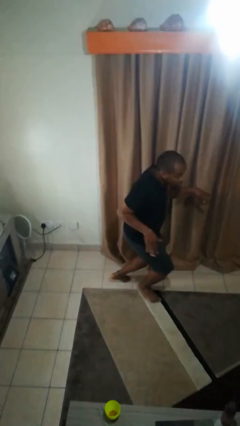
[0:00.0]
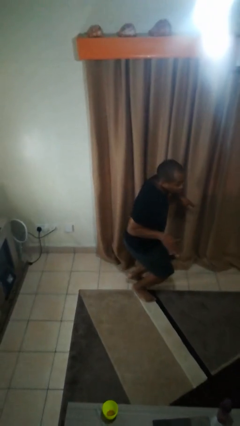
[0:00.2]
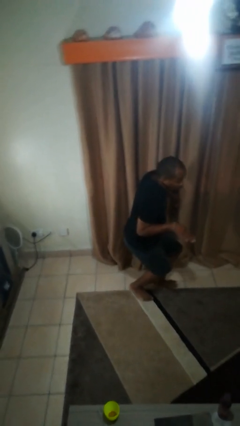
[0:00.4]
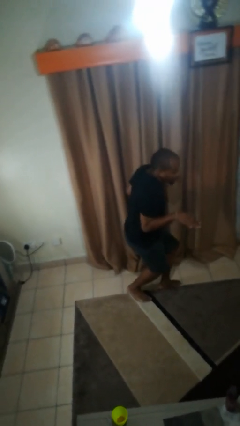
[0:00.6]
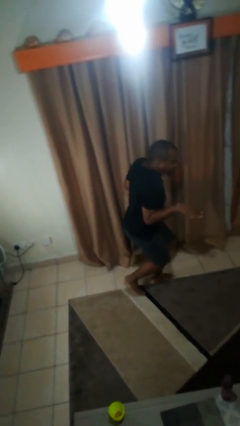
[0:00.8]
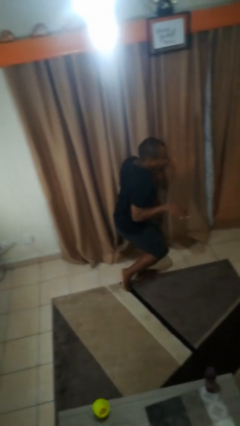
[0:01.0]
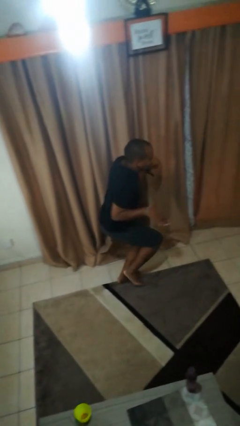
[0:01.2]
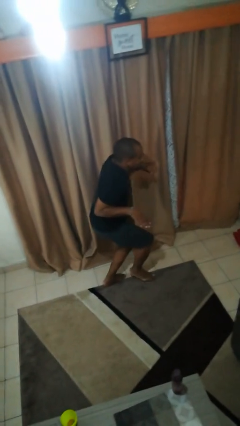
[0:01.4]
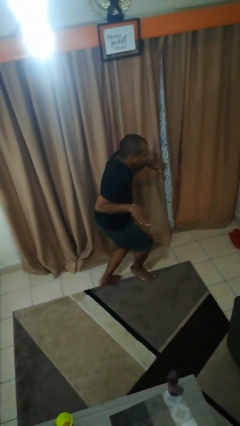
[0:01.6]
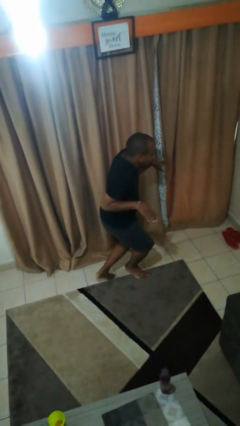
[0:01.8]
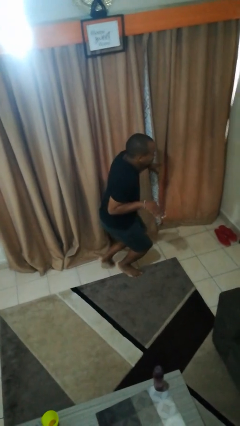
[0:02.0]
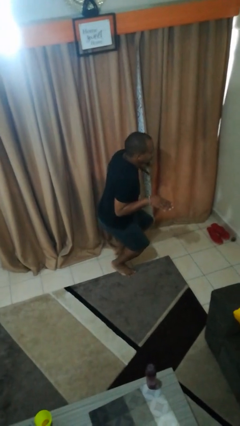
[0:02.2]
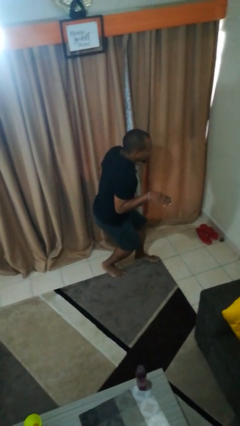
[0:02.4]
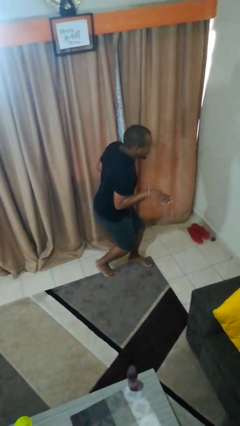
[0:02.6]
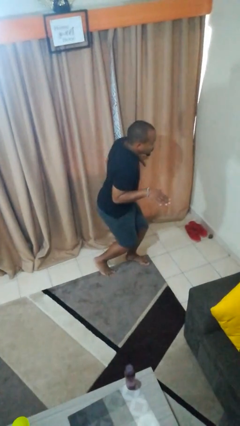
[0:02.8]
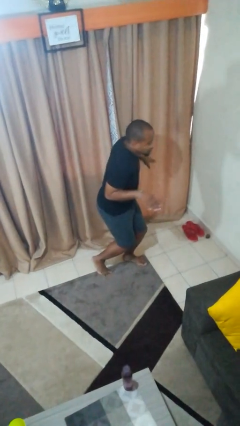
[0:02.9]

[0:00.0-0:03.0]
person walks tiptoe

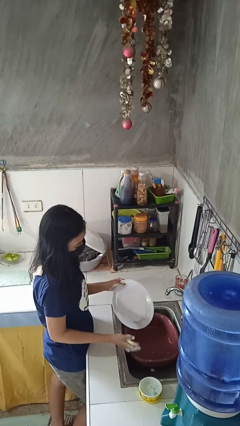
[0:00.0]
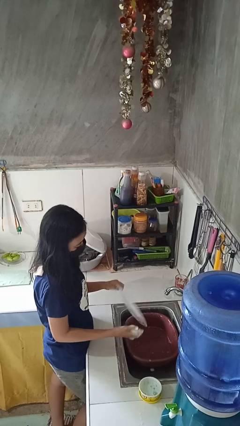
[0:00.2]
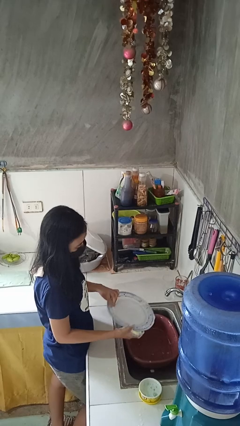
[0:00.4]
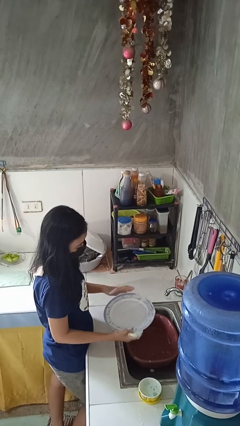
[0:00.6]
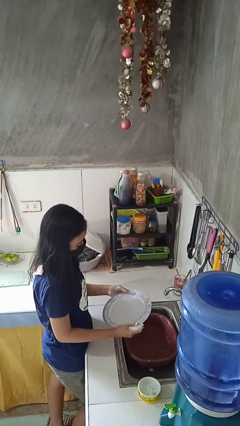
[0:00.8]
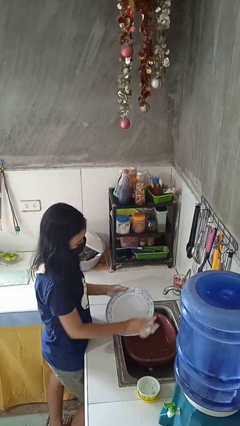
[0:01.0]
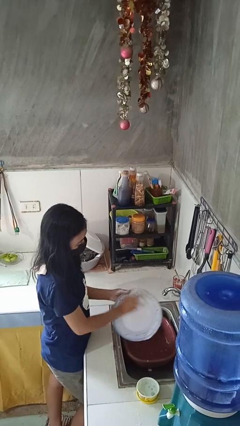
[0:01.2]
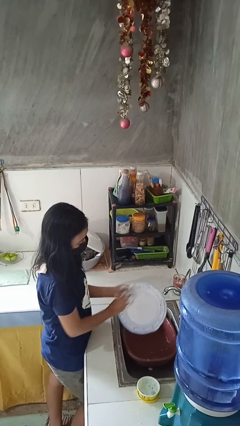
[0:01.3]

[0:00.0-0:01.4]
person washes dish

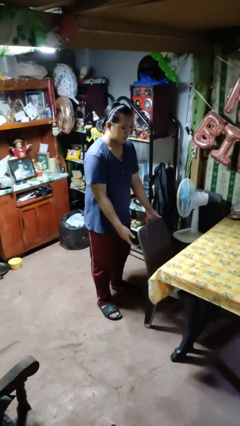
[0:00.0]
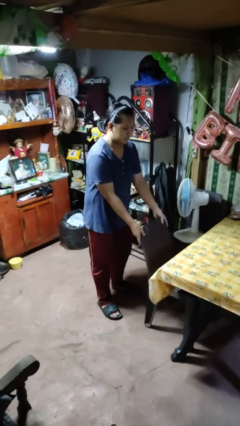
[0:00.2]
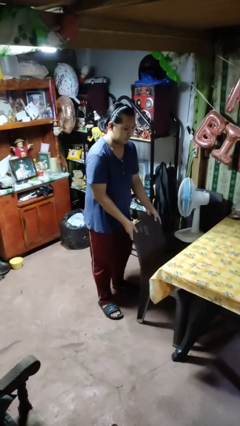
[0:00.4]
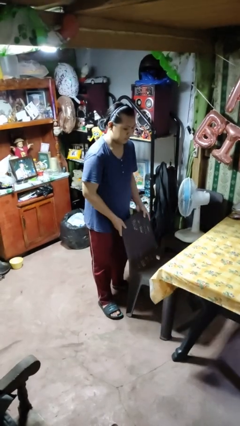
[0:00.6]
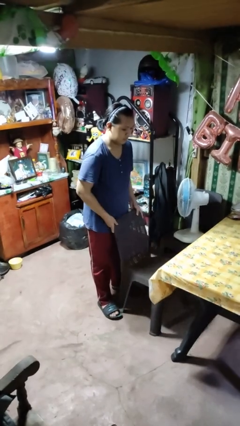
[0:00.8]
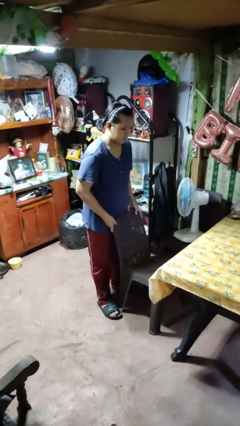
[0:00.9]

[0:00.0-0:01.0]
person pulls out chair

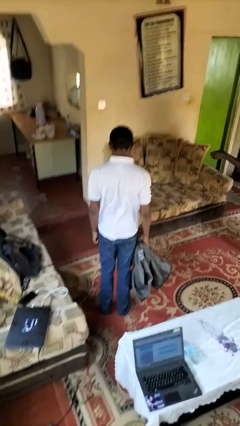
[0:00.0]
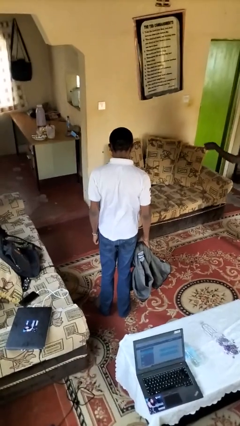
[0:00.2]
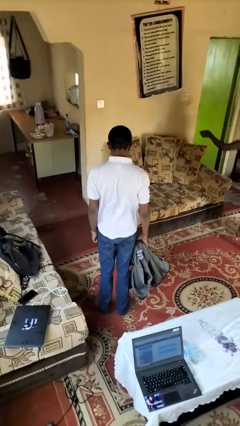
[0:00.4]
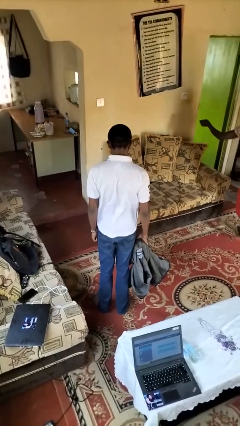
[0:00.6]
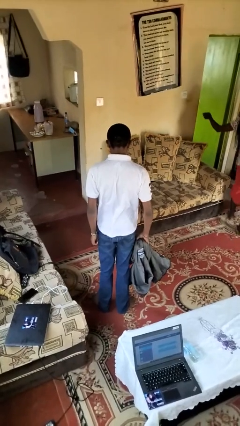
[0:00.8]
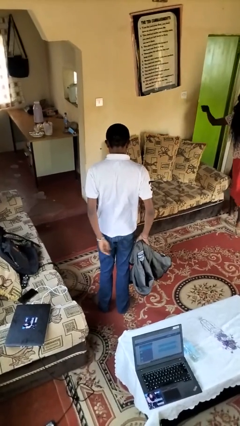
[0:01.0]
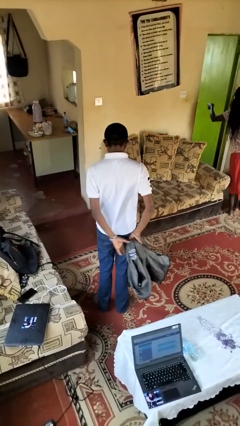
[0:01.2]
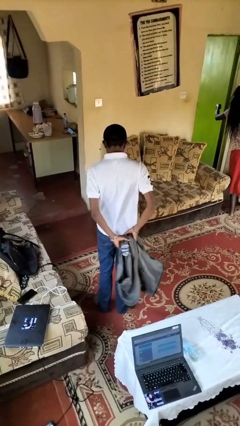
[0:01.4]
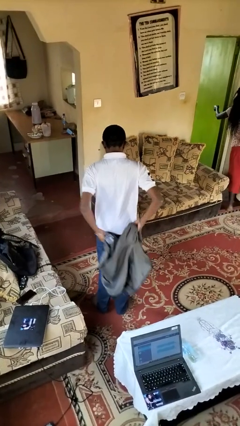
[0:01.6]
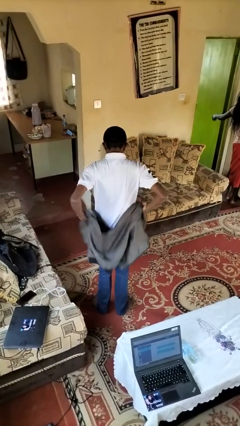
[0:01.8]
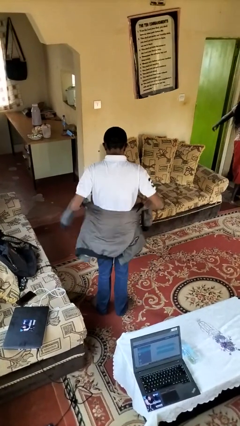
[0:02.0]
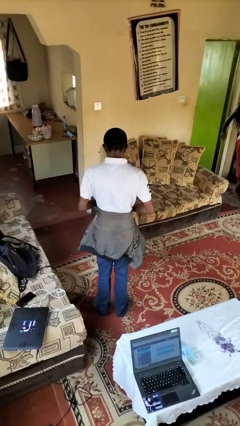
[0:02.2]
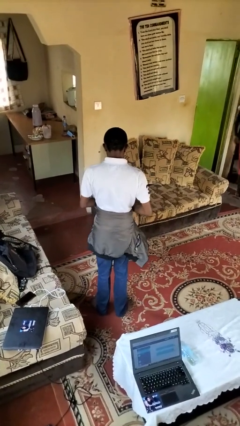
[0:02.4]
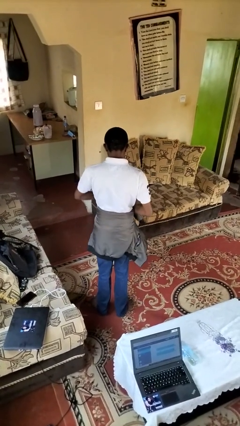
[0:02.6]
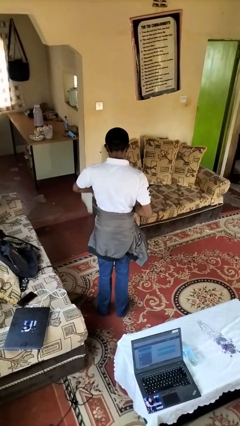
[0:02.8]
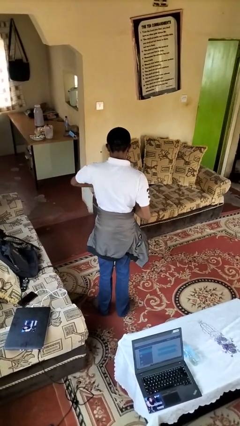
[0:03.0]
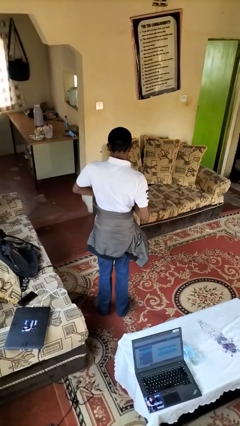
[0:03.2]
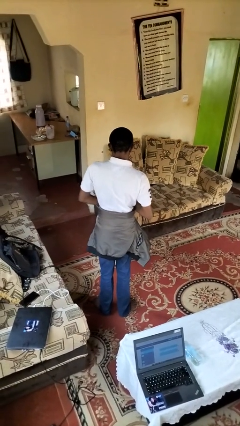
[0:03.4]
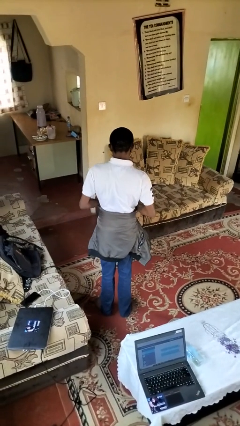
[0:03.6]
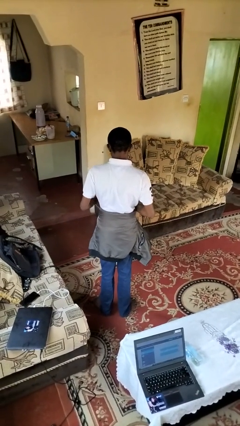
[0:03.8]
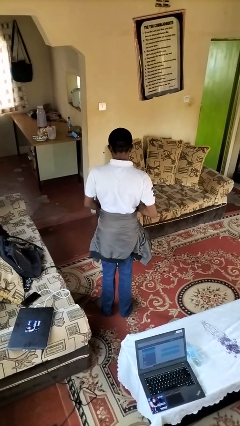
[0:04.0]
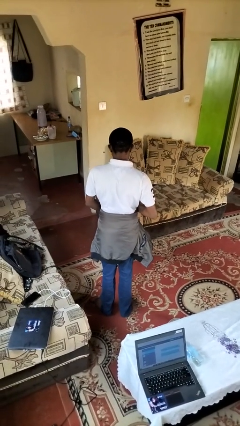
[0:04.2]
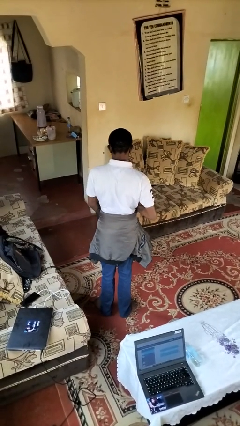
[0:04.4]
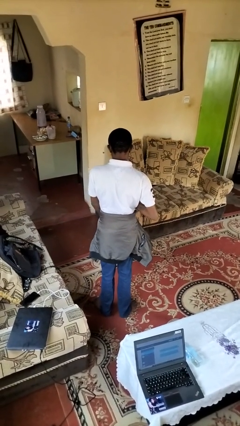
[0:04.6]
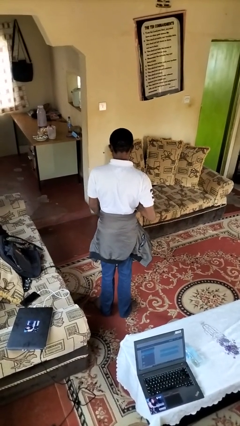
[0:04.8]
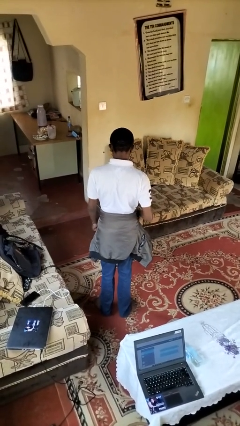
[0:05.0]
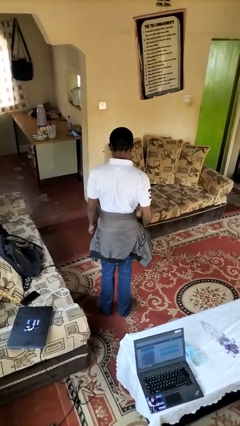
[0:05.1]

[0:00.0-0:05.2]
person ties jacket around waist

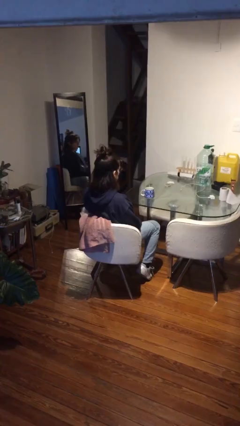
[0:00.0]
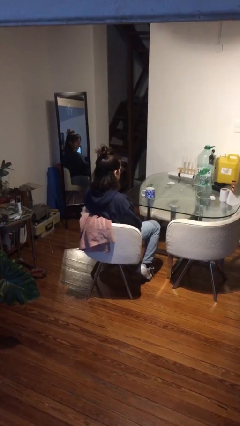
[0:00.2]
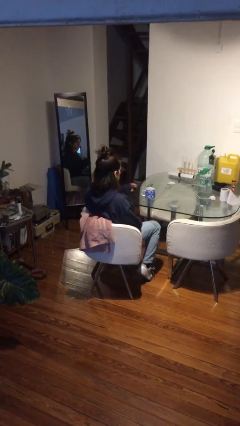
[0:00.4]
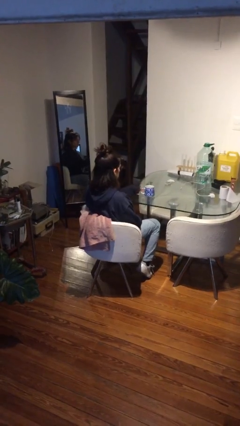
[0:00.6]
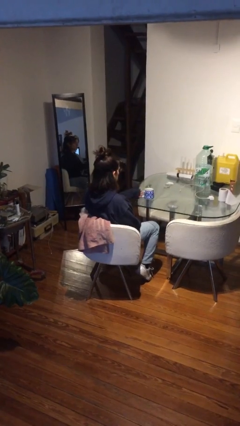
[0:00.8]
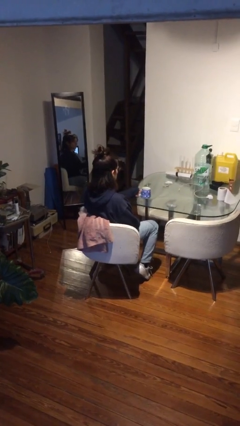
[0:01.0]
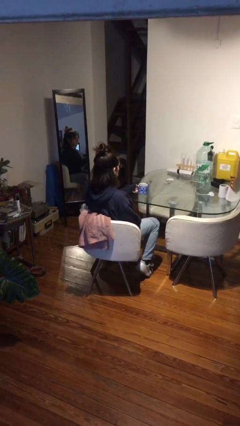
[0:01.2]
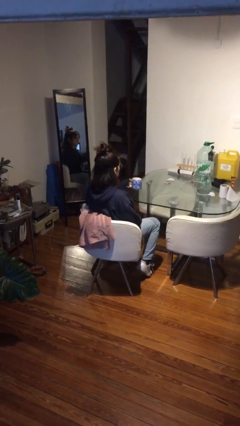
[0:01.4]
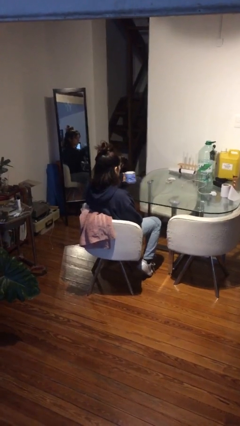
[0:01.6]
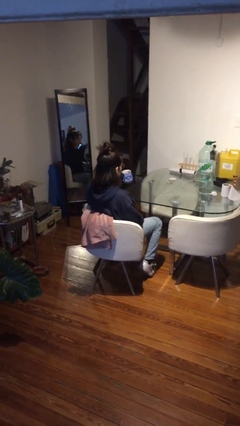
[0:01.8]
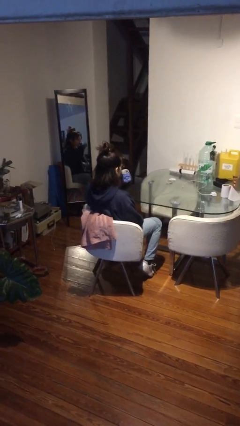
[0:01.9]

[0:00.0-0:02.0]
person picks up object from table

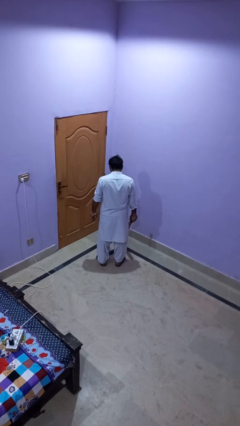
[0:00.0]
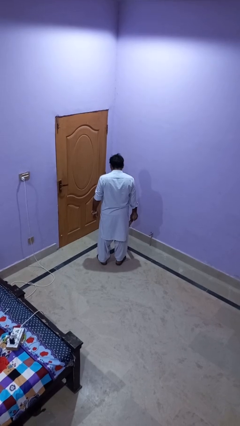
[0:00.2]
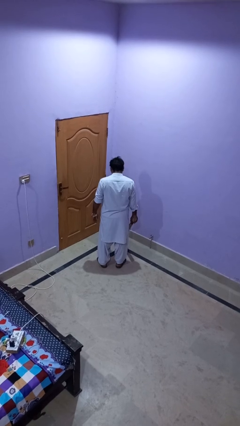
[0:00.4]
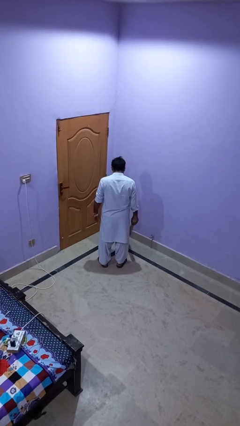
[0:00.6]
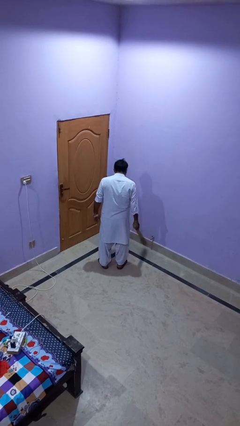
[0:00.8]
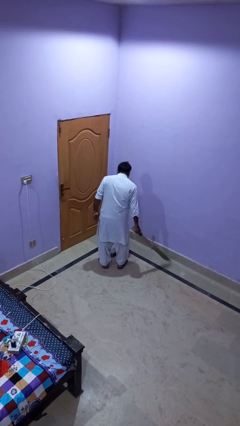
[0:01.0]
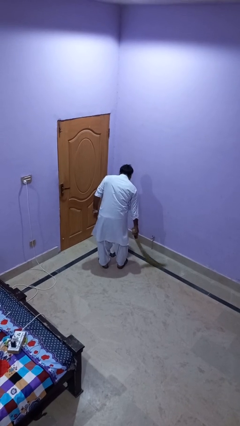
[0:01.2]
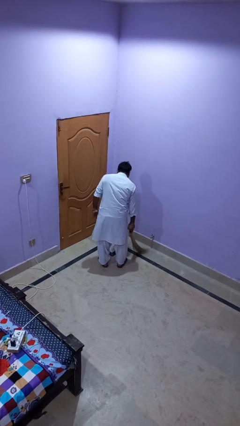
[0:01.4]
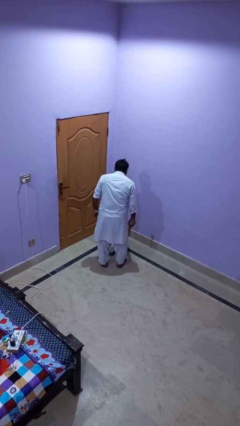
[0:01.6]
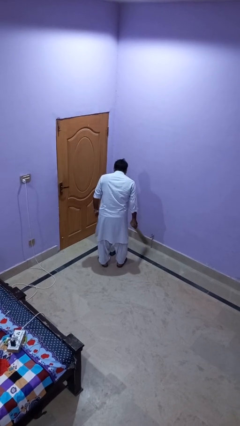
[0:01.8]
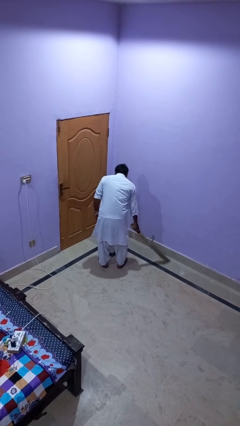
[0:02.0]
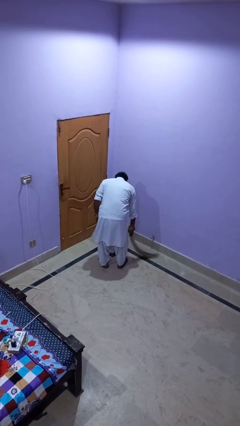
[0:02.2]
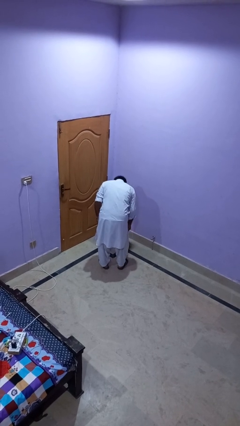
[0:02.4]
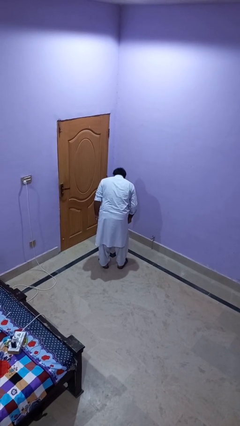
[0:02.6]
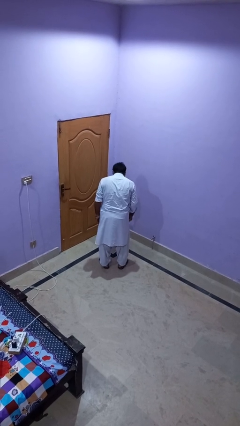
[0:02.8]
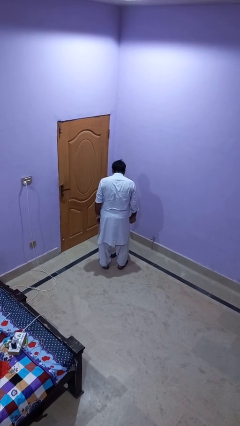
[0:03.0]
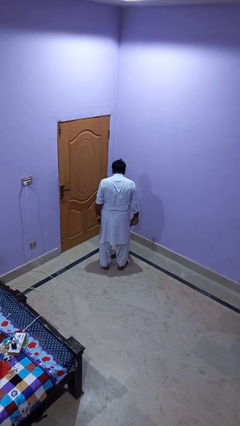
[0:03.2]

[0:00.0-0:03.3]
person sweeps floor

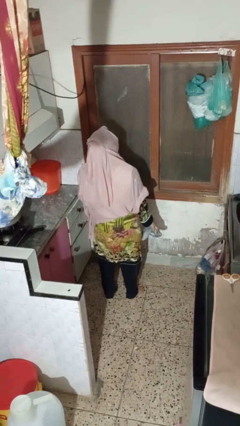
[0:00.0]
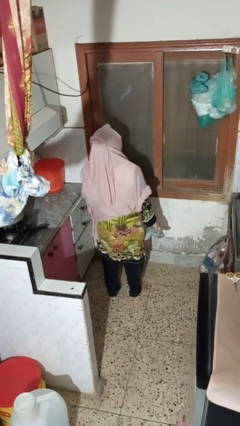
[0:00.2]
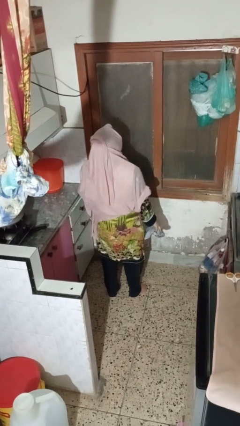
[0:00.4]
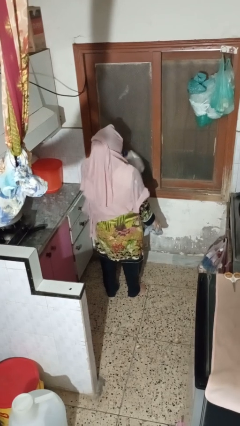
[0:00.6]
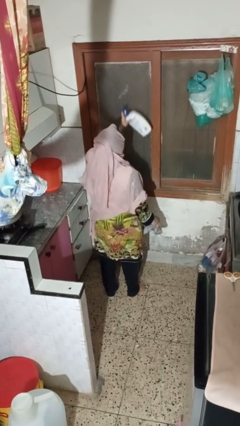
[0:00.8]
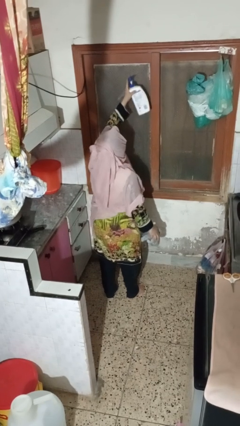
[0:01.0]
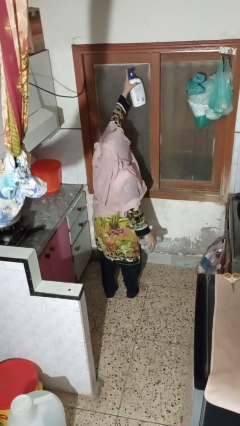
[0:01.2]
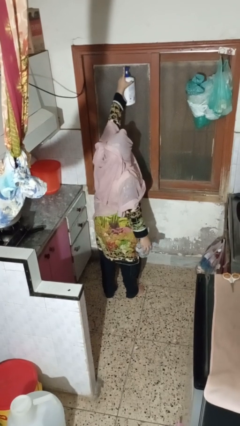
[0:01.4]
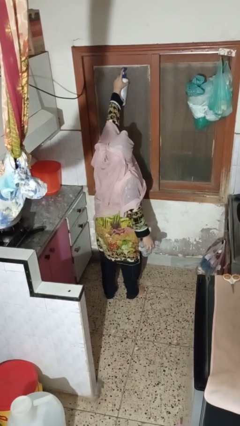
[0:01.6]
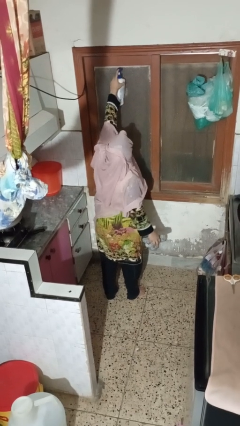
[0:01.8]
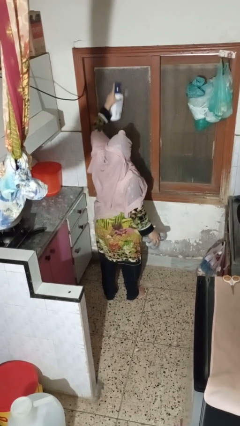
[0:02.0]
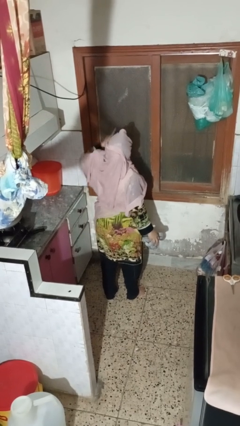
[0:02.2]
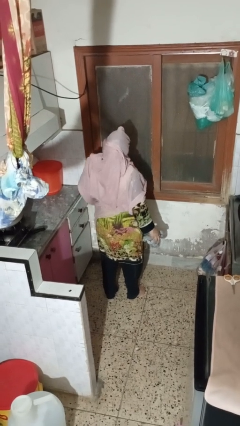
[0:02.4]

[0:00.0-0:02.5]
person sprays from bottle
